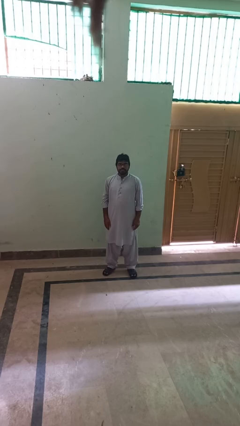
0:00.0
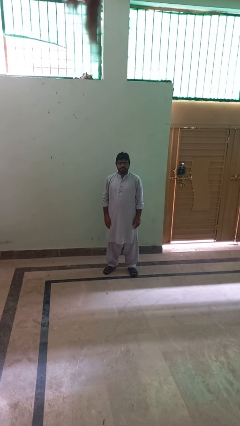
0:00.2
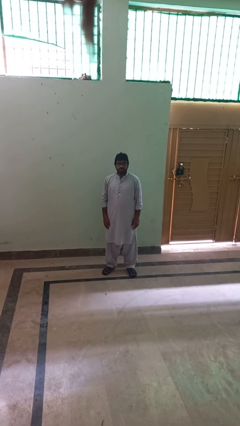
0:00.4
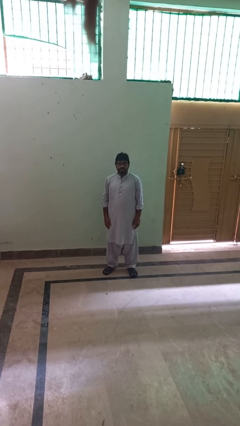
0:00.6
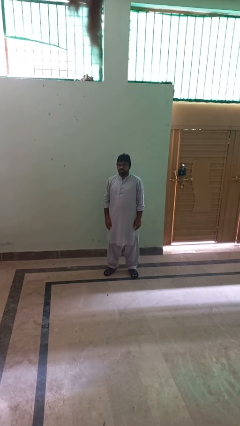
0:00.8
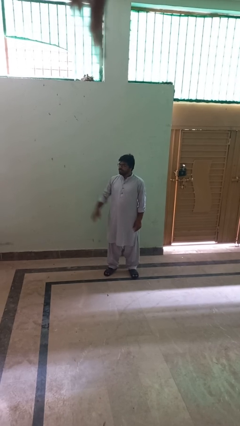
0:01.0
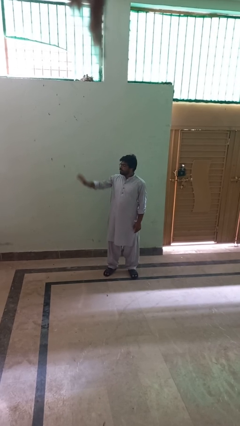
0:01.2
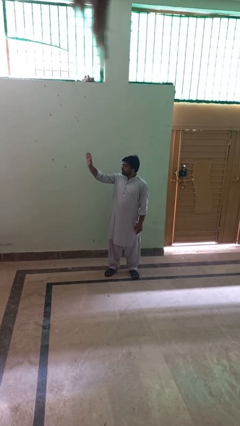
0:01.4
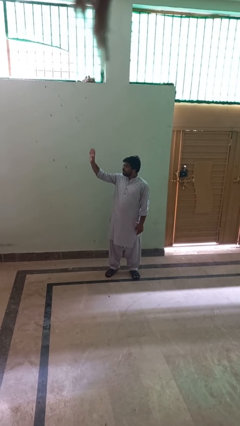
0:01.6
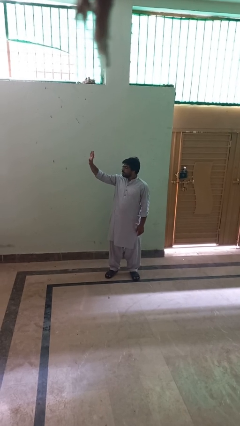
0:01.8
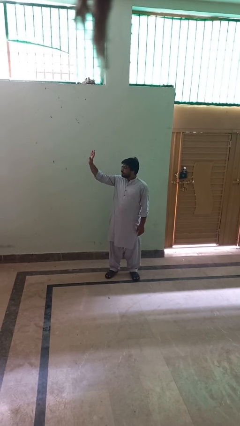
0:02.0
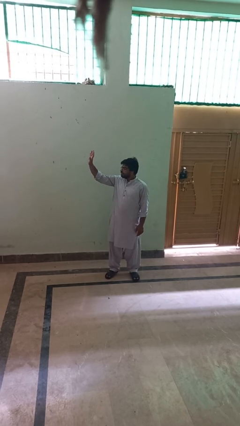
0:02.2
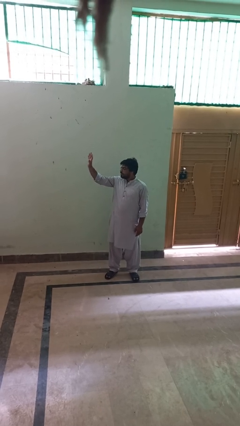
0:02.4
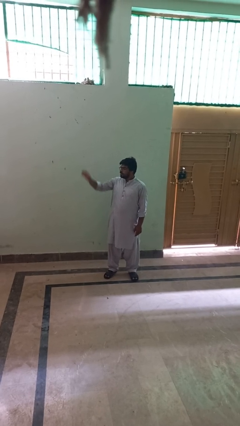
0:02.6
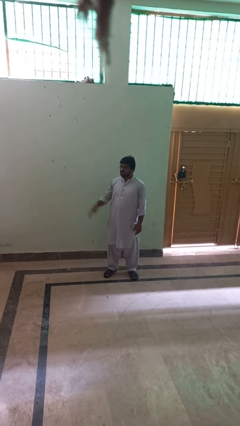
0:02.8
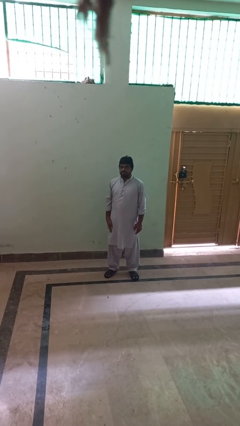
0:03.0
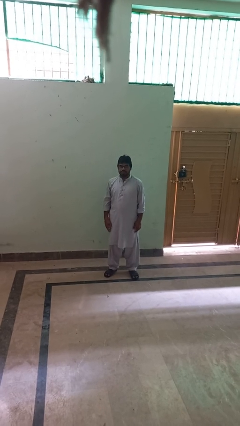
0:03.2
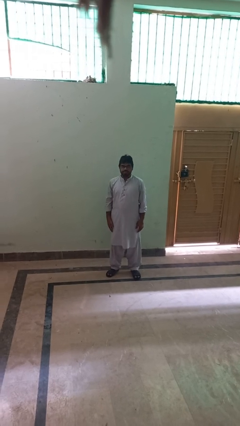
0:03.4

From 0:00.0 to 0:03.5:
person waves at person

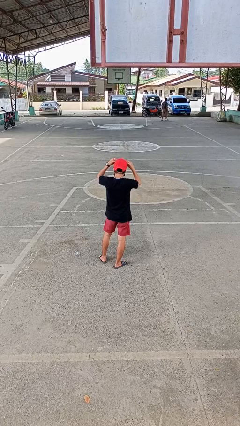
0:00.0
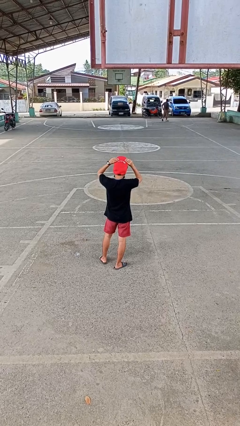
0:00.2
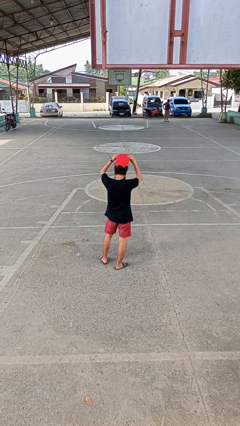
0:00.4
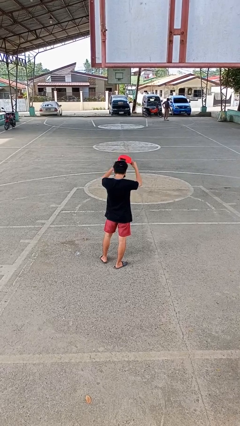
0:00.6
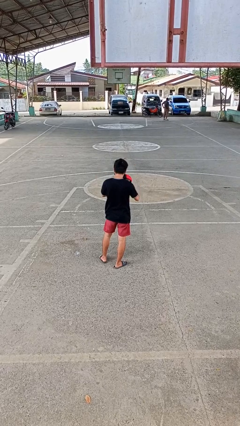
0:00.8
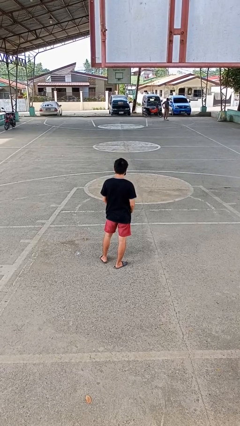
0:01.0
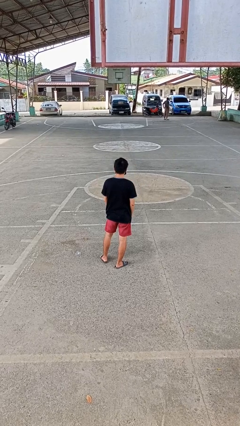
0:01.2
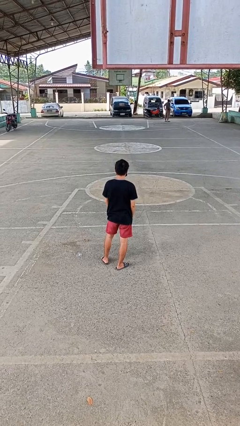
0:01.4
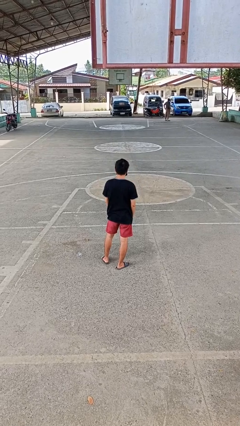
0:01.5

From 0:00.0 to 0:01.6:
person takes off hat

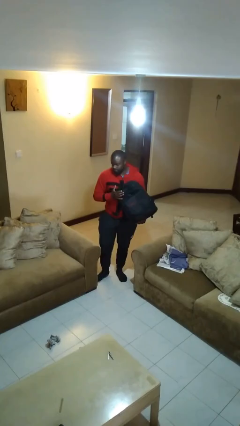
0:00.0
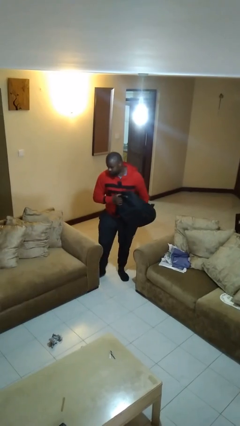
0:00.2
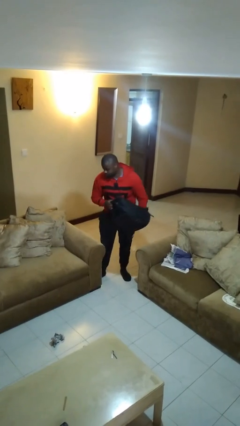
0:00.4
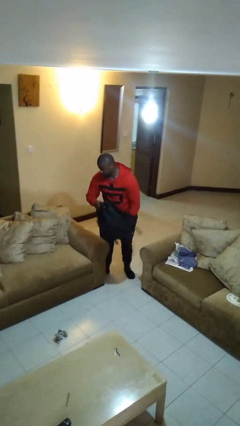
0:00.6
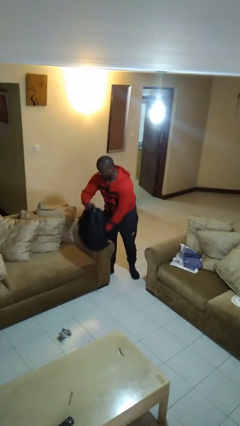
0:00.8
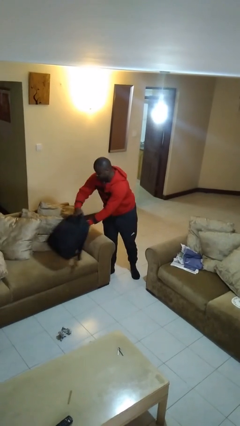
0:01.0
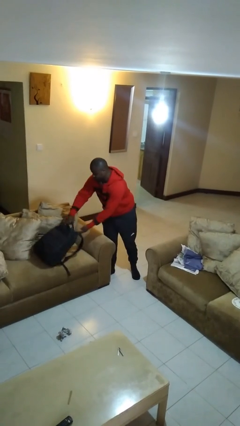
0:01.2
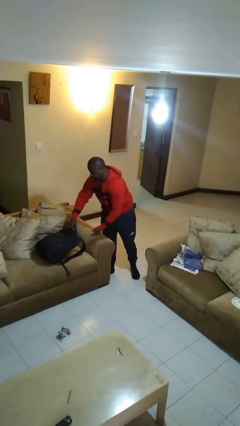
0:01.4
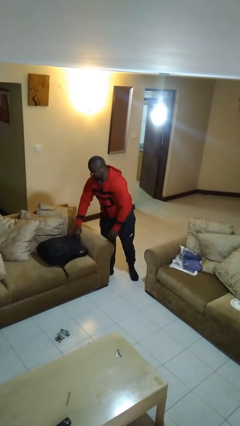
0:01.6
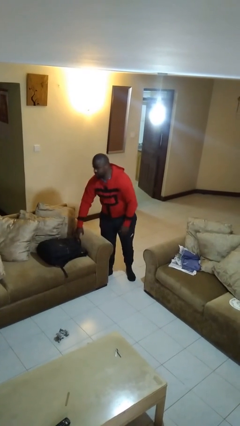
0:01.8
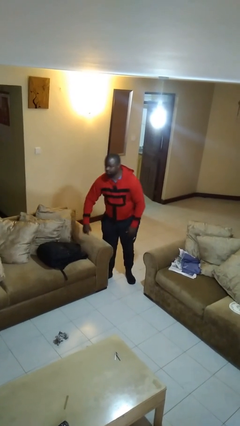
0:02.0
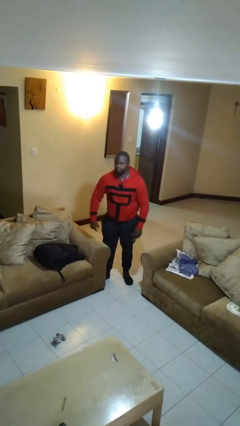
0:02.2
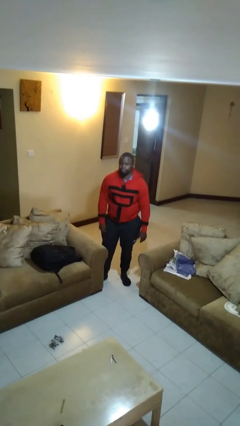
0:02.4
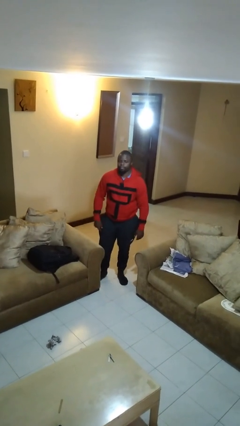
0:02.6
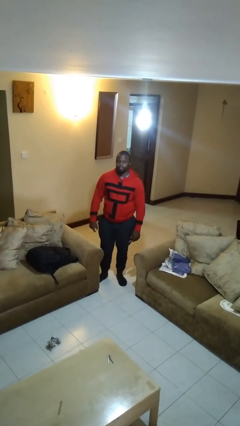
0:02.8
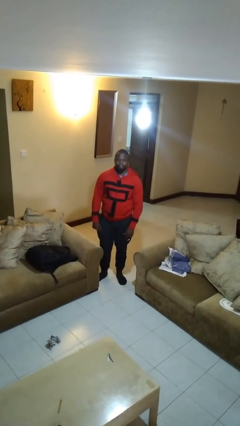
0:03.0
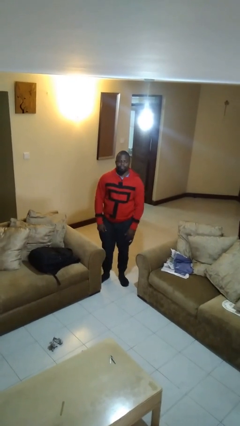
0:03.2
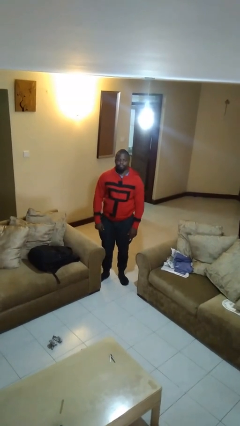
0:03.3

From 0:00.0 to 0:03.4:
person puts down object on couch

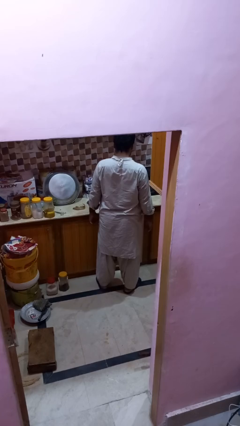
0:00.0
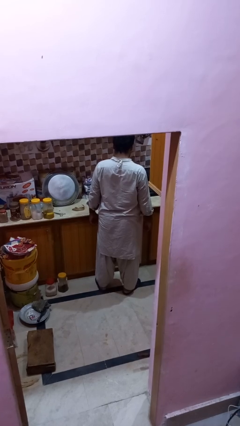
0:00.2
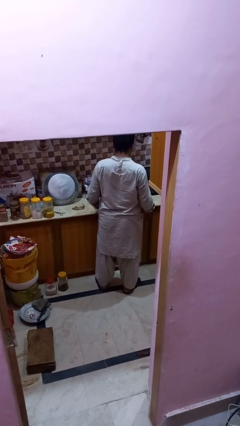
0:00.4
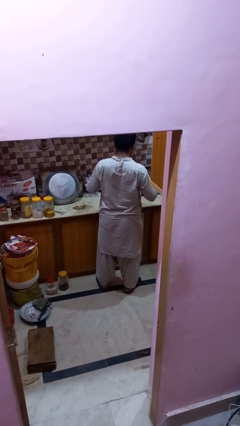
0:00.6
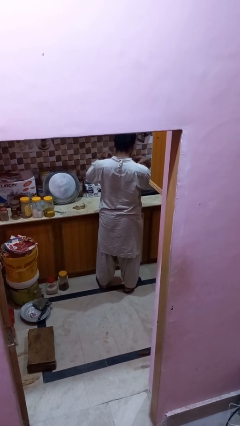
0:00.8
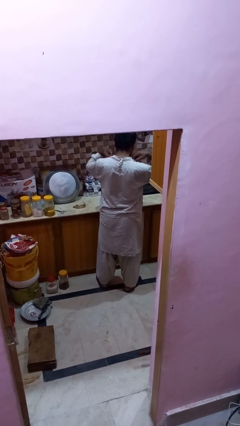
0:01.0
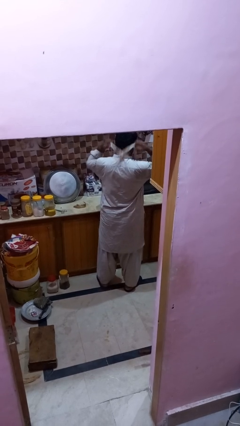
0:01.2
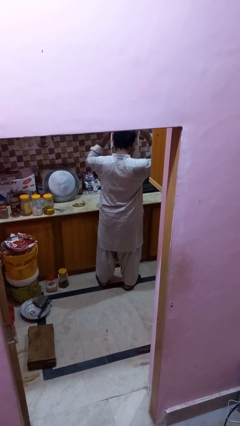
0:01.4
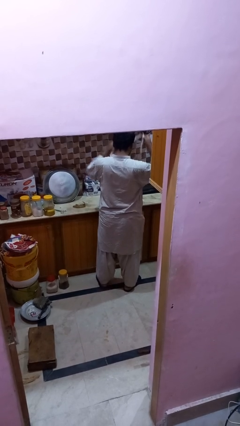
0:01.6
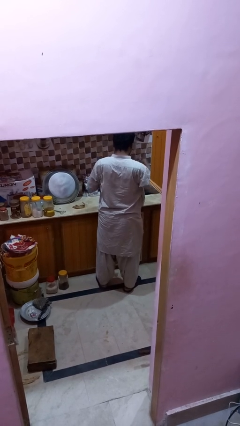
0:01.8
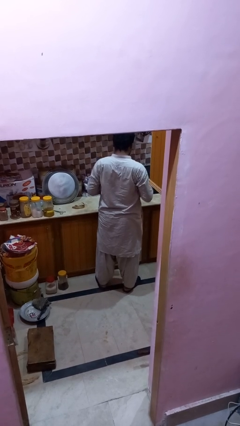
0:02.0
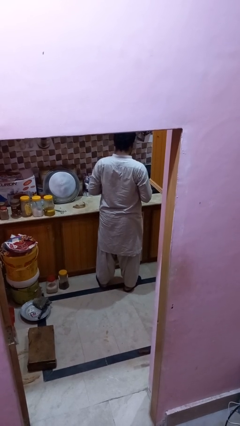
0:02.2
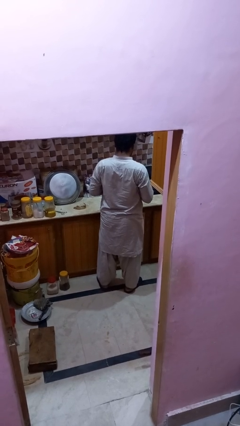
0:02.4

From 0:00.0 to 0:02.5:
person takes off apron

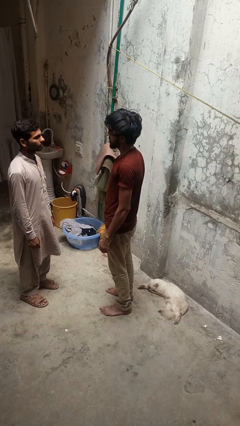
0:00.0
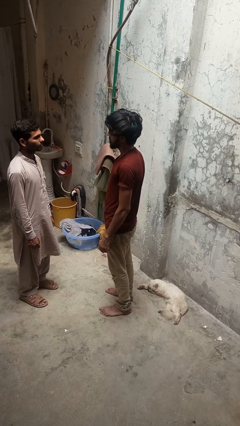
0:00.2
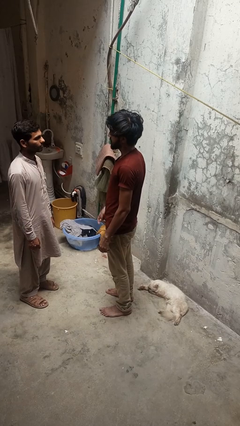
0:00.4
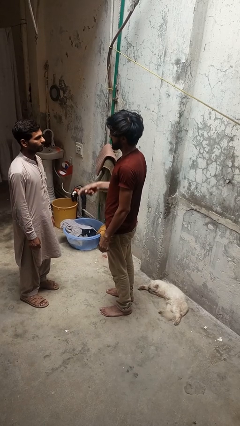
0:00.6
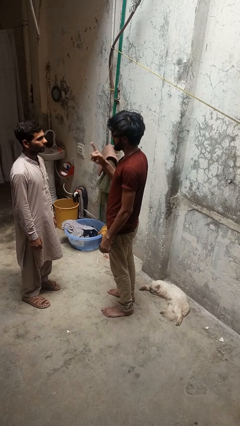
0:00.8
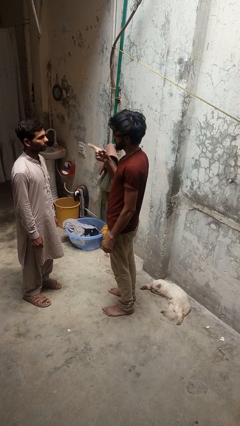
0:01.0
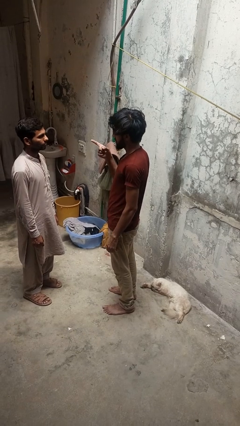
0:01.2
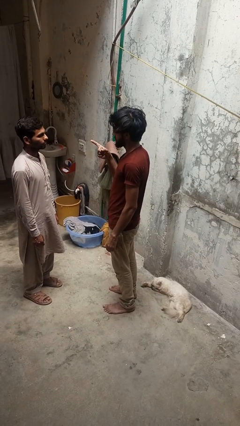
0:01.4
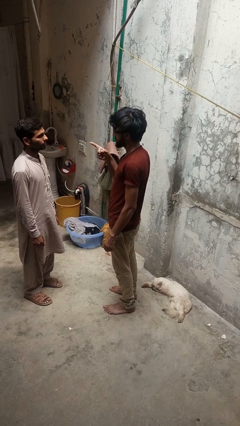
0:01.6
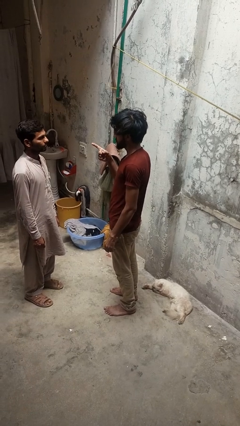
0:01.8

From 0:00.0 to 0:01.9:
person points at person

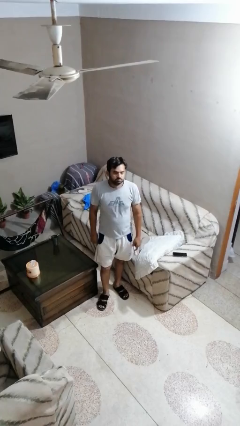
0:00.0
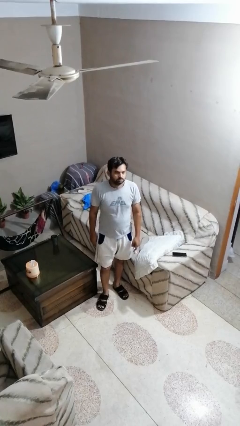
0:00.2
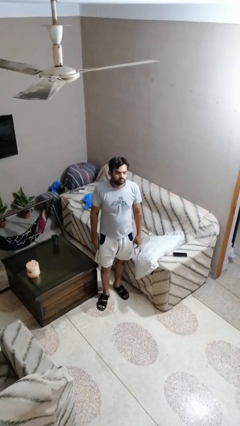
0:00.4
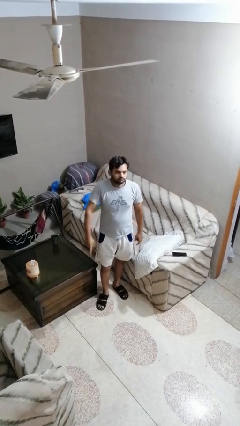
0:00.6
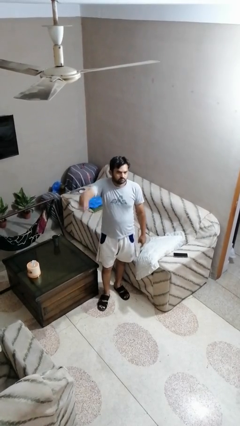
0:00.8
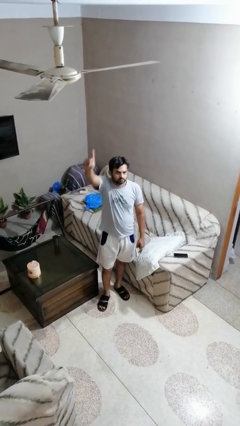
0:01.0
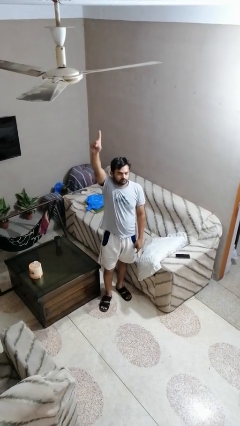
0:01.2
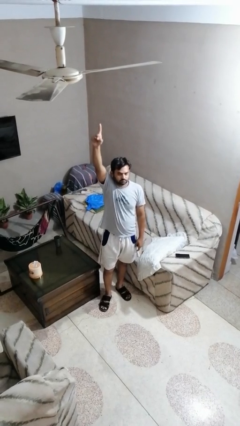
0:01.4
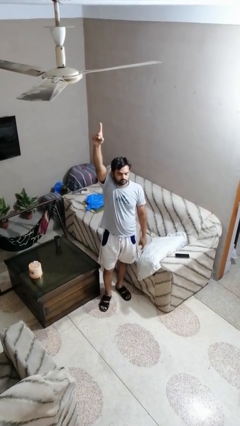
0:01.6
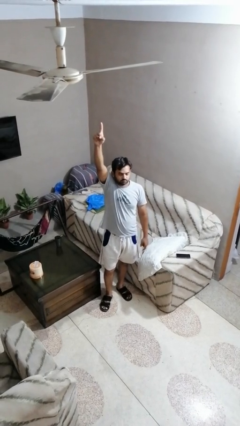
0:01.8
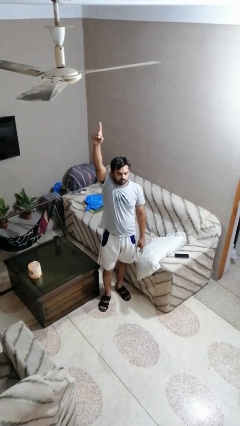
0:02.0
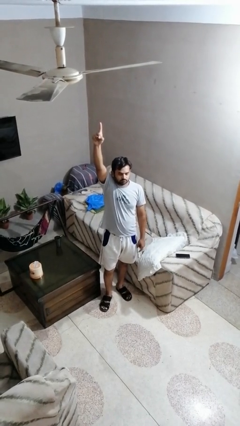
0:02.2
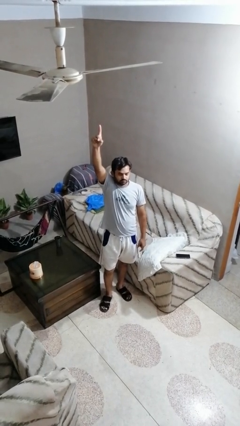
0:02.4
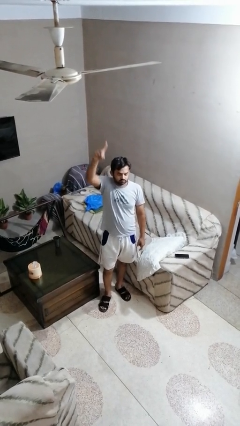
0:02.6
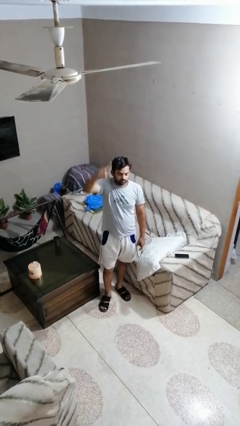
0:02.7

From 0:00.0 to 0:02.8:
person gestures number one

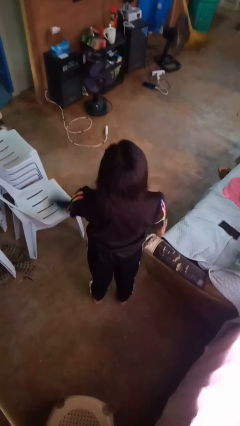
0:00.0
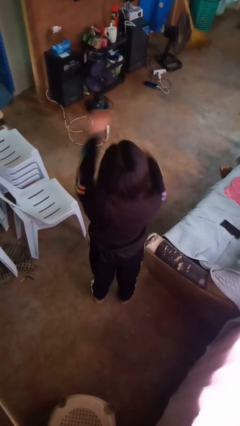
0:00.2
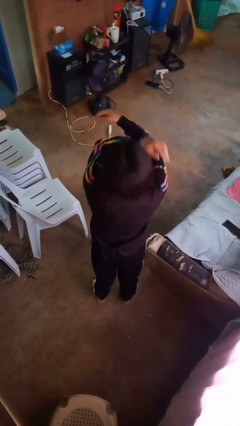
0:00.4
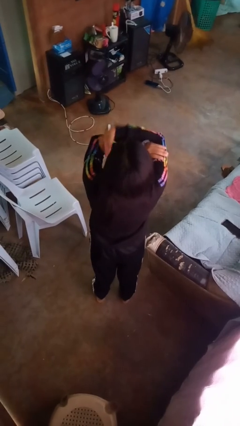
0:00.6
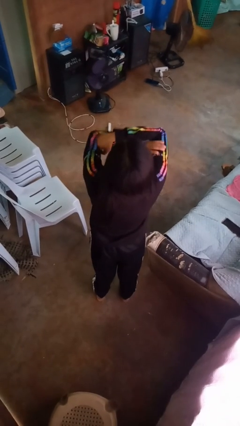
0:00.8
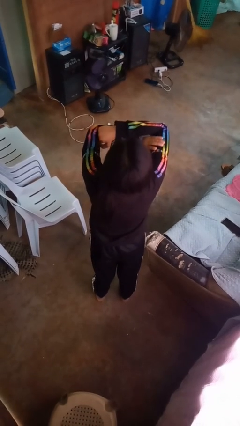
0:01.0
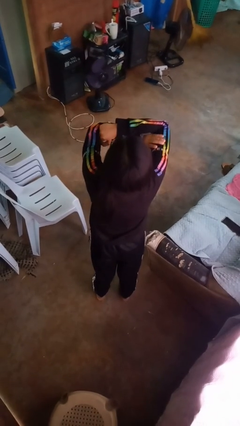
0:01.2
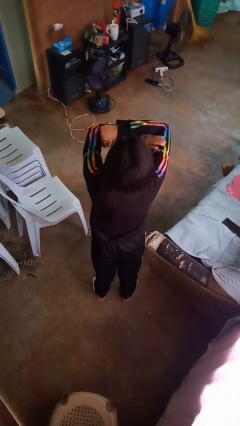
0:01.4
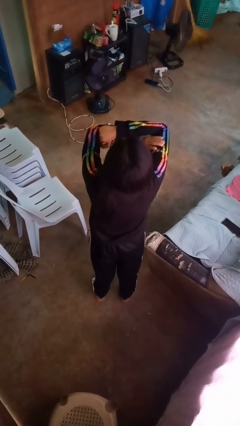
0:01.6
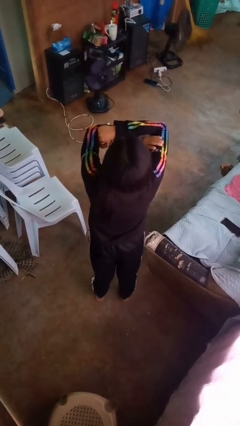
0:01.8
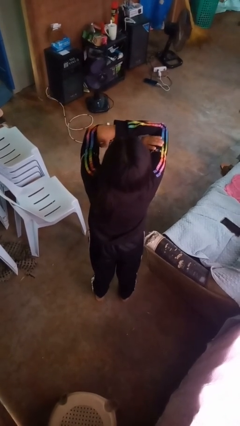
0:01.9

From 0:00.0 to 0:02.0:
person gestures arms x
